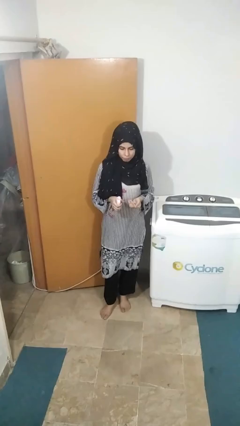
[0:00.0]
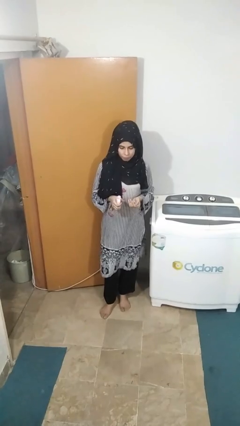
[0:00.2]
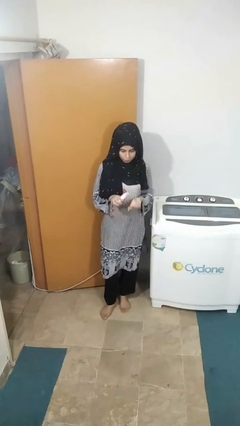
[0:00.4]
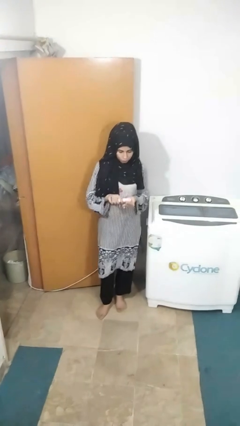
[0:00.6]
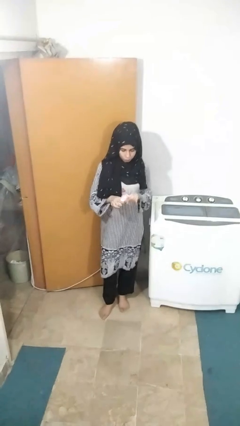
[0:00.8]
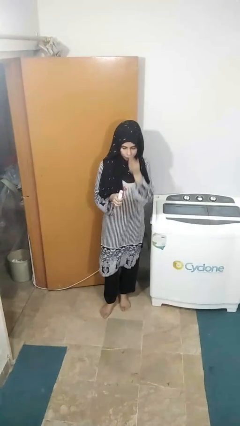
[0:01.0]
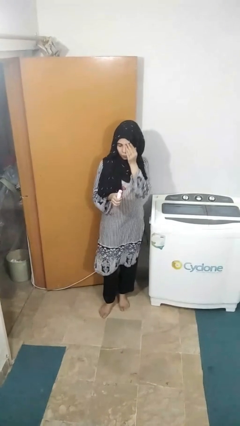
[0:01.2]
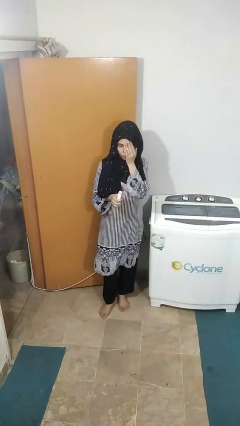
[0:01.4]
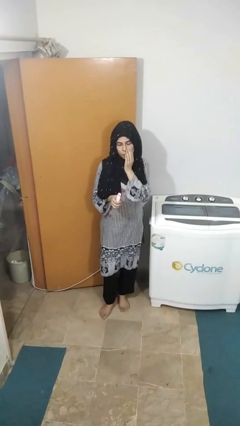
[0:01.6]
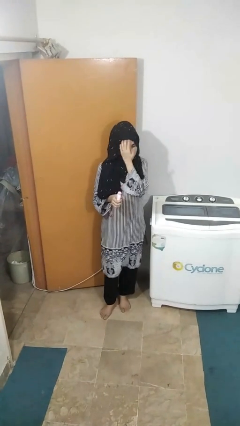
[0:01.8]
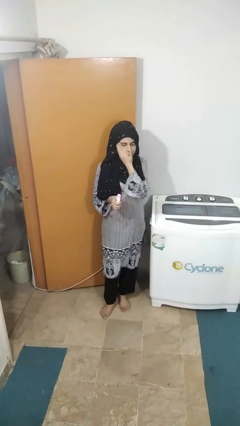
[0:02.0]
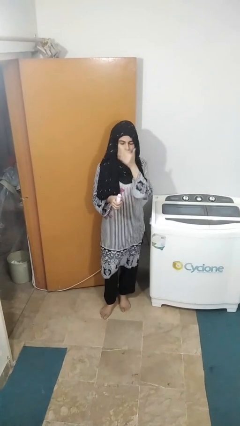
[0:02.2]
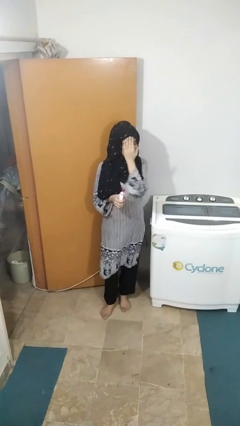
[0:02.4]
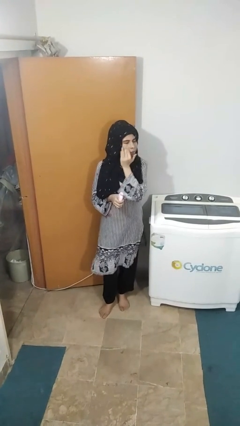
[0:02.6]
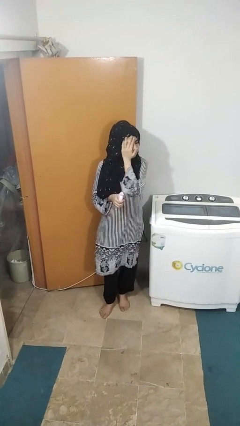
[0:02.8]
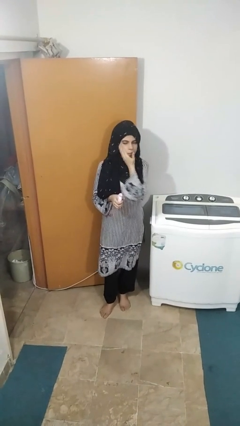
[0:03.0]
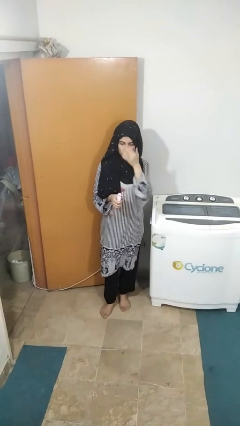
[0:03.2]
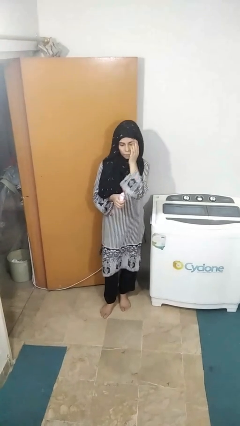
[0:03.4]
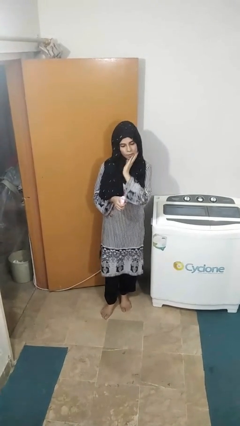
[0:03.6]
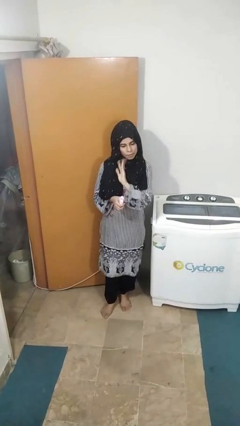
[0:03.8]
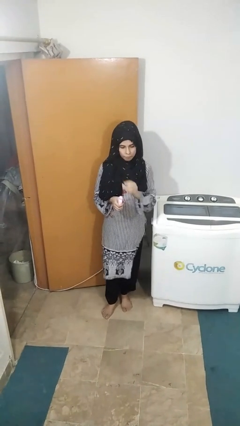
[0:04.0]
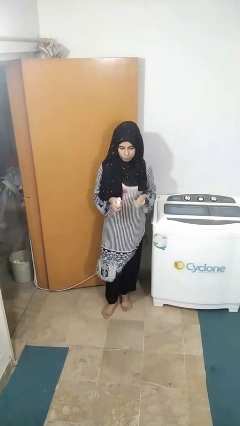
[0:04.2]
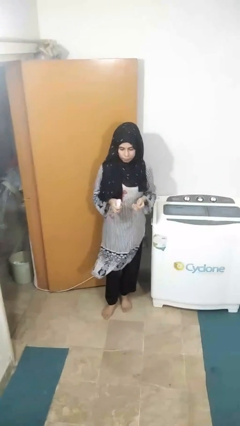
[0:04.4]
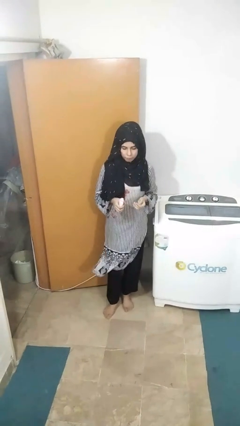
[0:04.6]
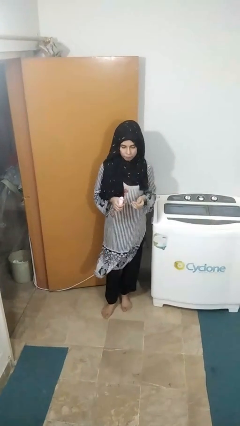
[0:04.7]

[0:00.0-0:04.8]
person lights candle

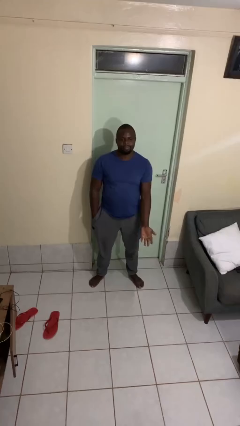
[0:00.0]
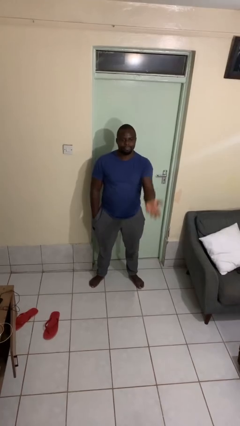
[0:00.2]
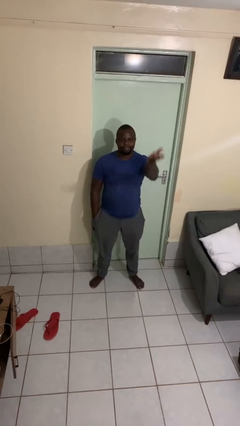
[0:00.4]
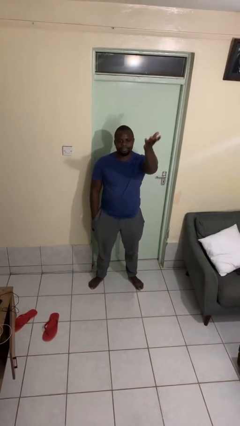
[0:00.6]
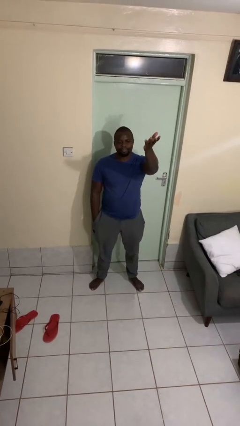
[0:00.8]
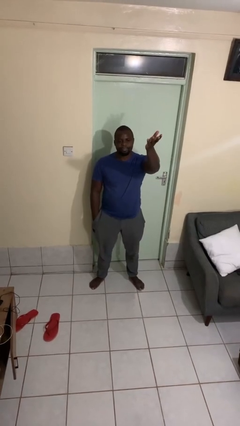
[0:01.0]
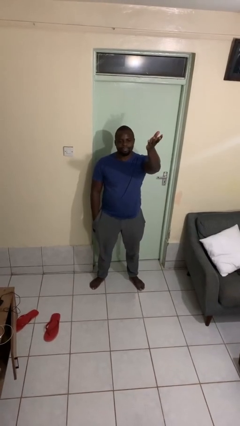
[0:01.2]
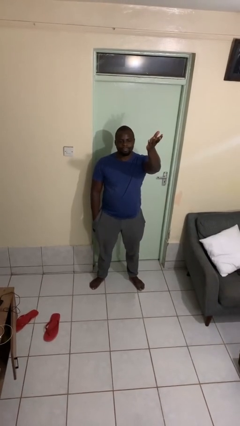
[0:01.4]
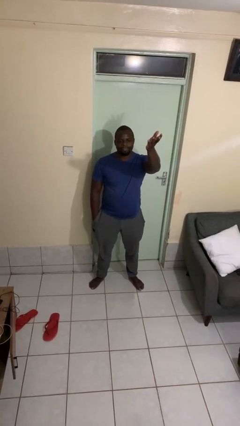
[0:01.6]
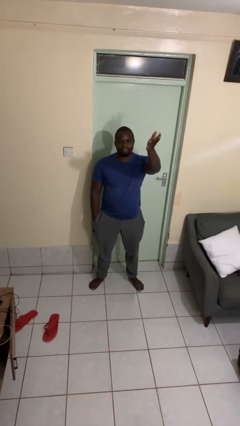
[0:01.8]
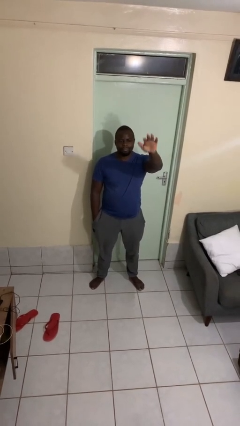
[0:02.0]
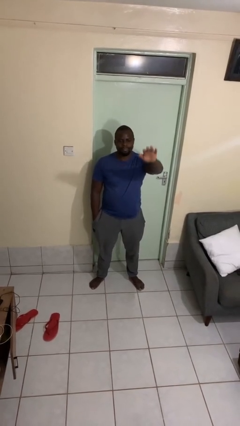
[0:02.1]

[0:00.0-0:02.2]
person gestures swipe up

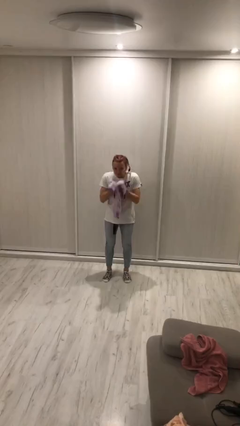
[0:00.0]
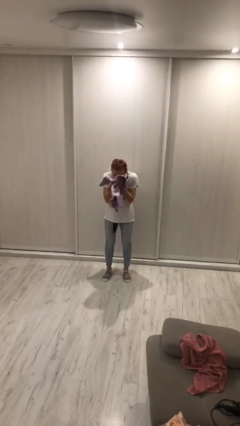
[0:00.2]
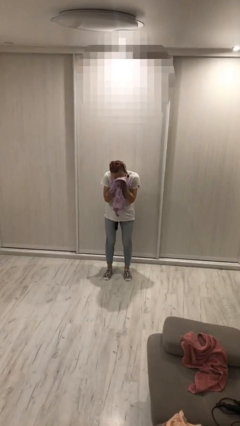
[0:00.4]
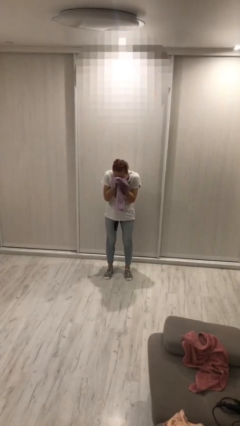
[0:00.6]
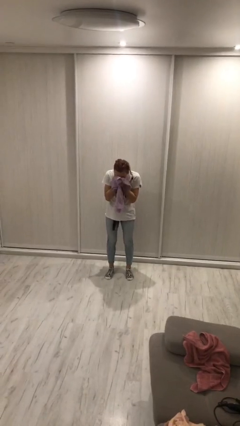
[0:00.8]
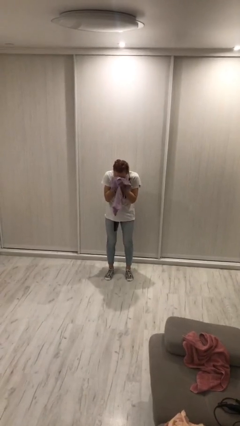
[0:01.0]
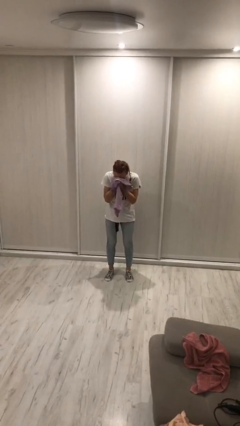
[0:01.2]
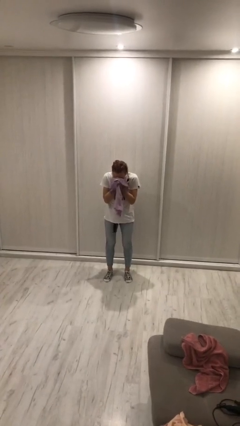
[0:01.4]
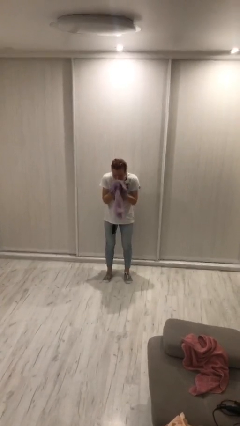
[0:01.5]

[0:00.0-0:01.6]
person blows nose

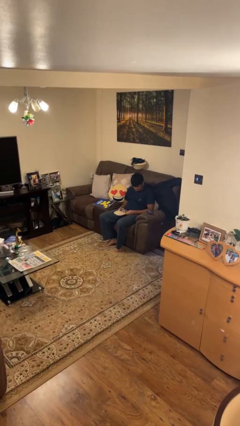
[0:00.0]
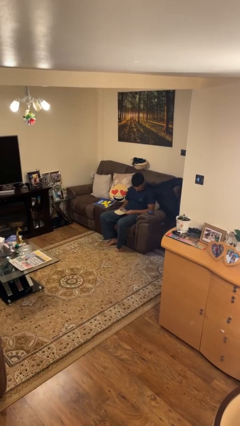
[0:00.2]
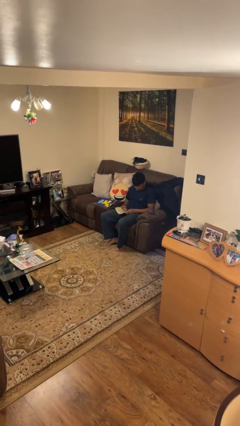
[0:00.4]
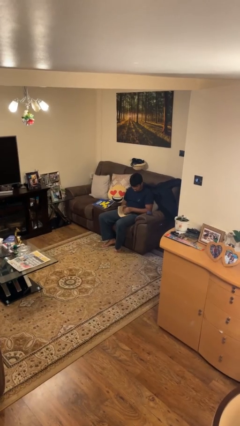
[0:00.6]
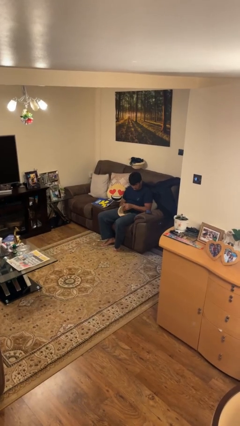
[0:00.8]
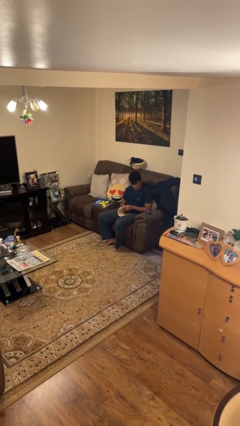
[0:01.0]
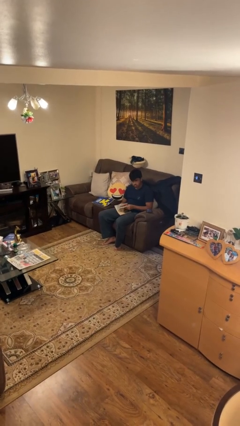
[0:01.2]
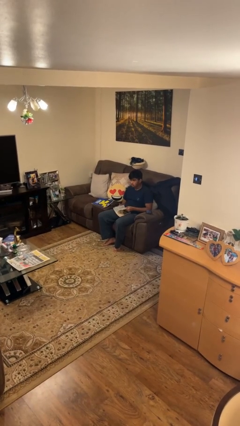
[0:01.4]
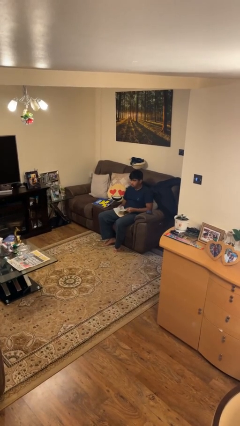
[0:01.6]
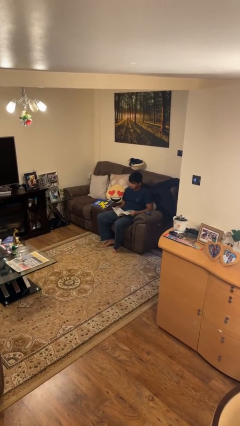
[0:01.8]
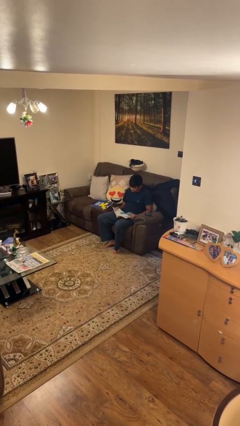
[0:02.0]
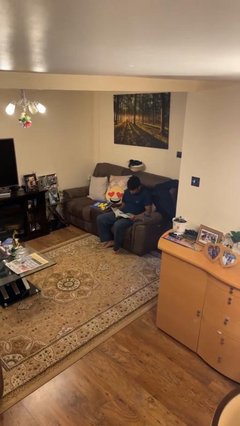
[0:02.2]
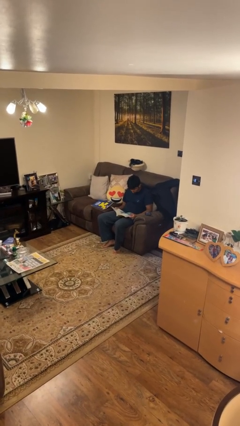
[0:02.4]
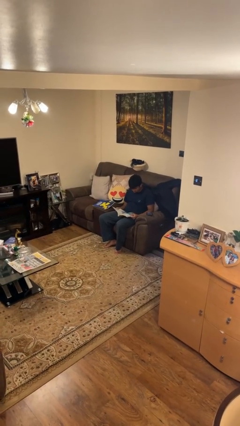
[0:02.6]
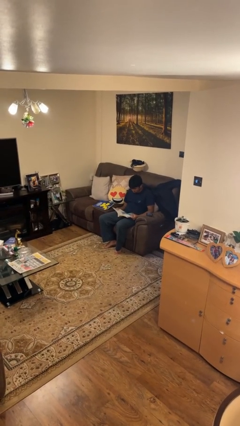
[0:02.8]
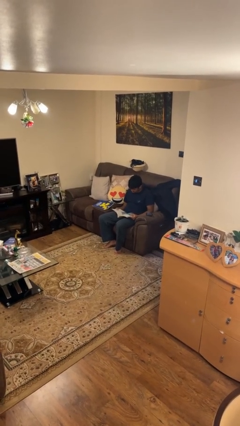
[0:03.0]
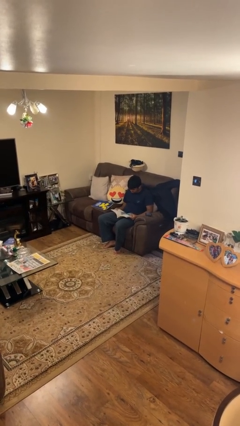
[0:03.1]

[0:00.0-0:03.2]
person reads book

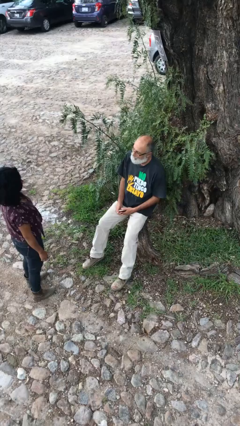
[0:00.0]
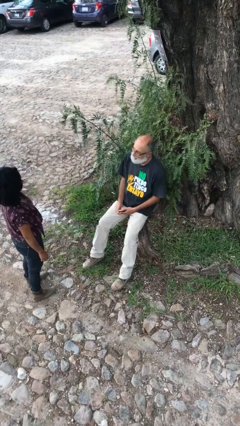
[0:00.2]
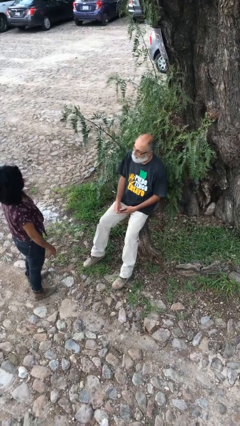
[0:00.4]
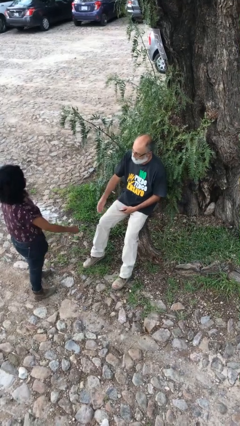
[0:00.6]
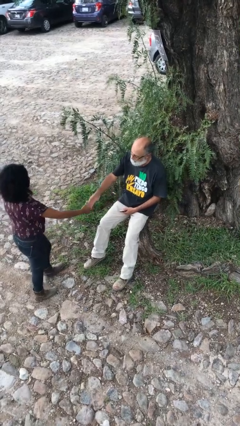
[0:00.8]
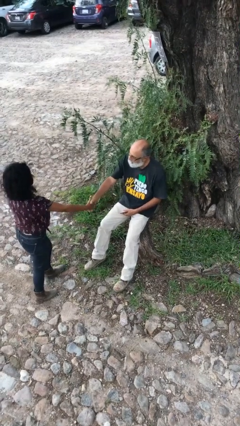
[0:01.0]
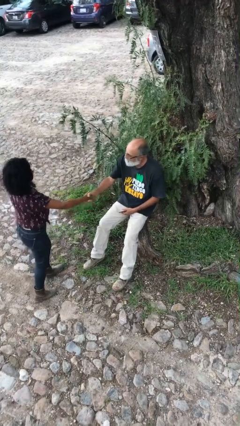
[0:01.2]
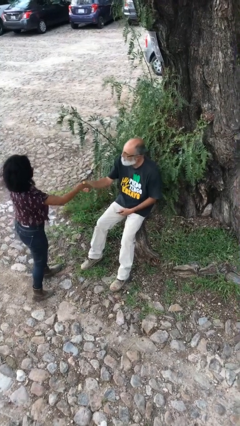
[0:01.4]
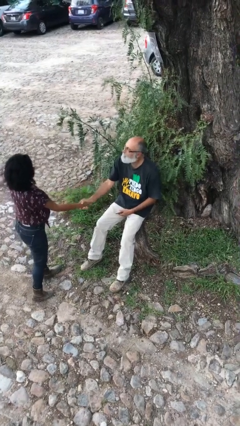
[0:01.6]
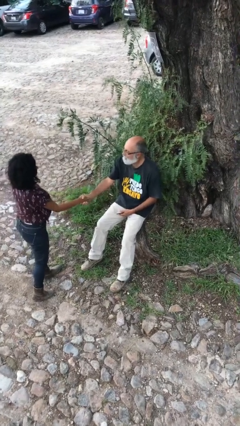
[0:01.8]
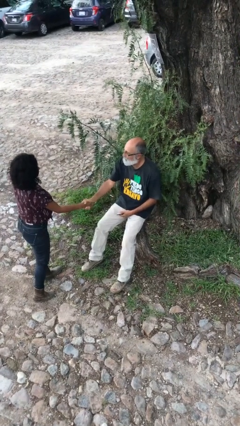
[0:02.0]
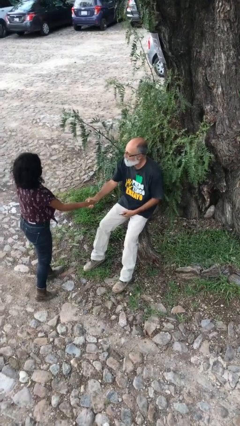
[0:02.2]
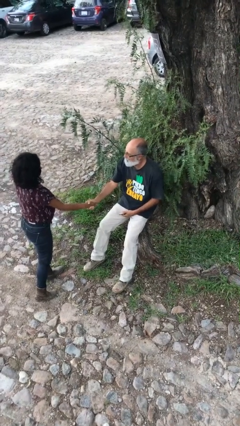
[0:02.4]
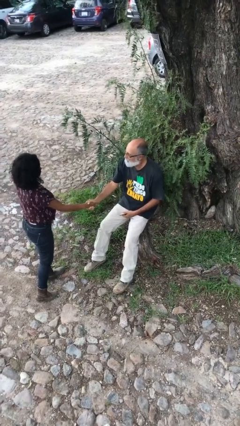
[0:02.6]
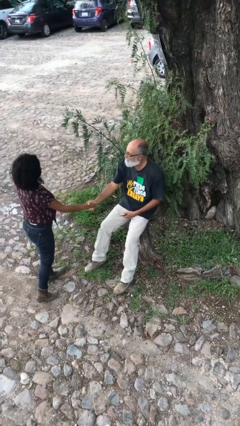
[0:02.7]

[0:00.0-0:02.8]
person shakes hand

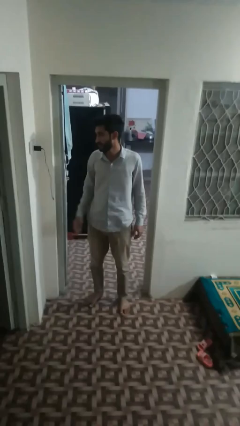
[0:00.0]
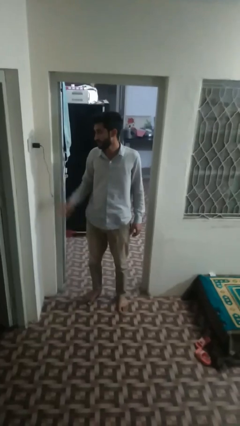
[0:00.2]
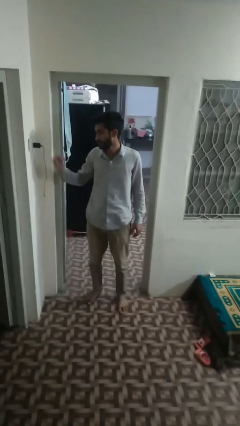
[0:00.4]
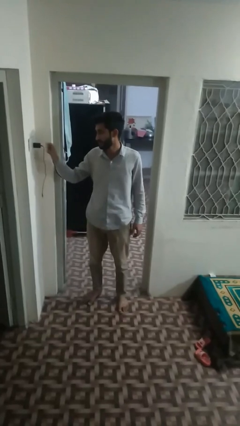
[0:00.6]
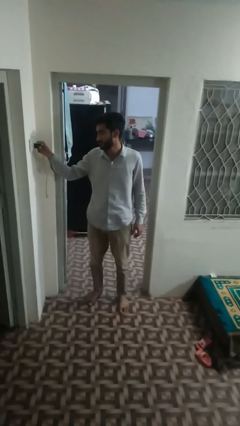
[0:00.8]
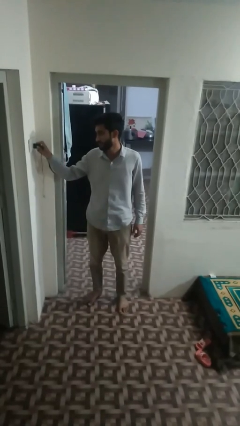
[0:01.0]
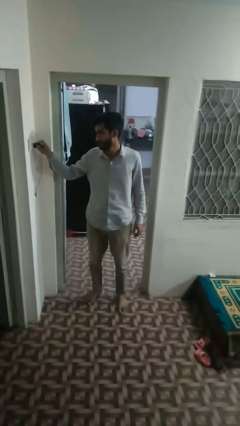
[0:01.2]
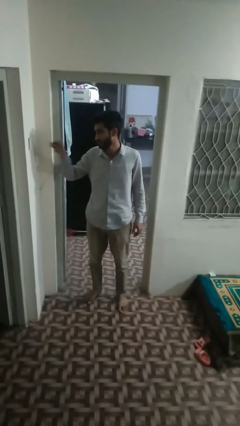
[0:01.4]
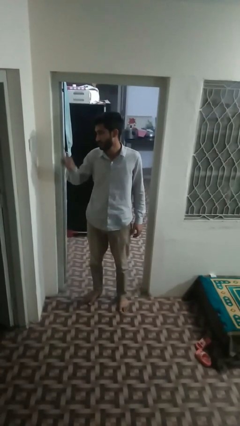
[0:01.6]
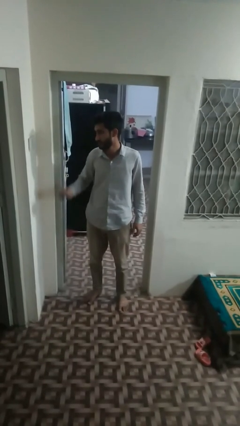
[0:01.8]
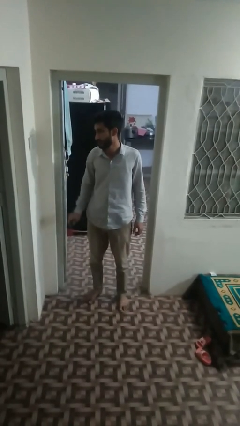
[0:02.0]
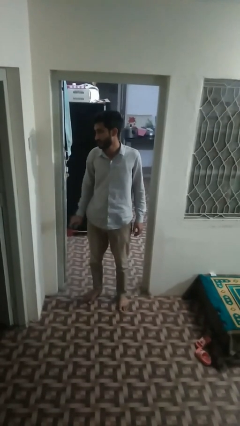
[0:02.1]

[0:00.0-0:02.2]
person unplugs from electrical socket

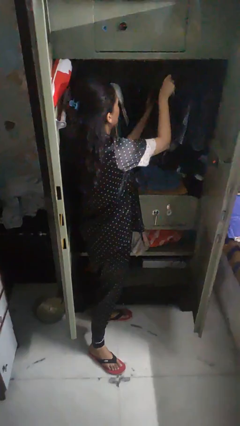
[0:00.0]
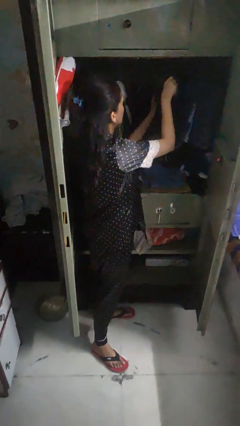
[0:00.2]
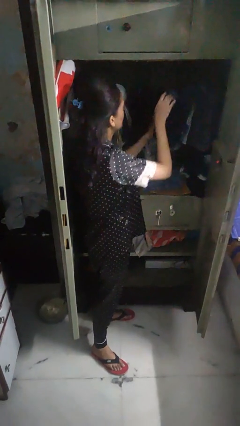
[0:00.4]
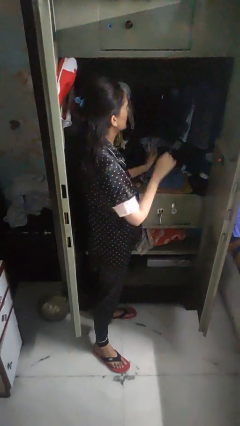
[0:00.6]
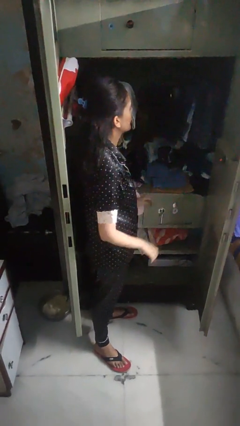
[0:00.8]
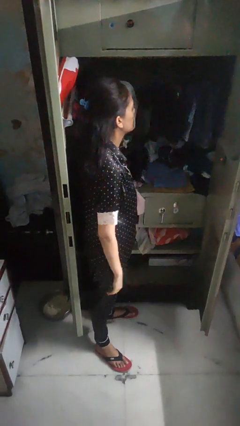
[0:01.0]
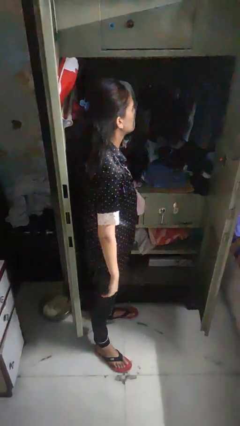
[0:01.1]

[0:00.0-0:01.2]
person puts clothes into closet
